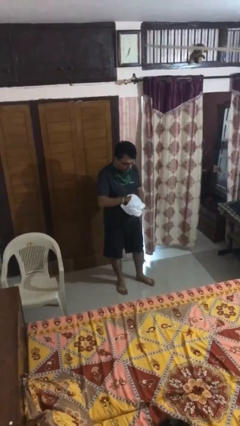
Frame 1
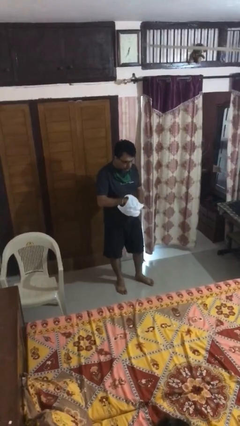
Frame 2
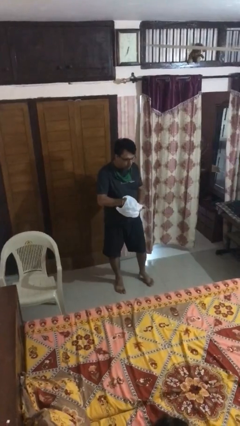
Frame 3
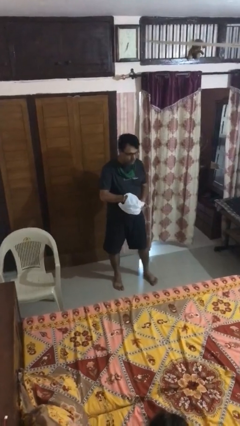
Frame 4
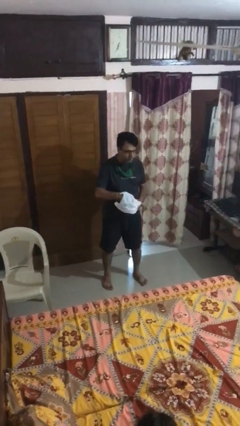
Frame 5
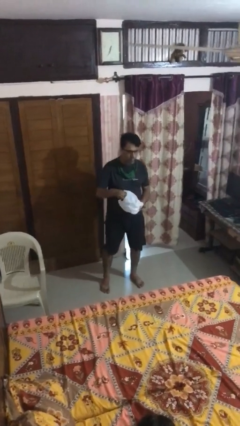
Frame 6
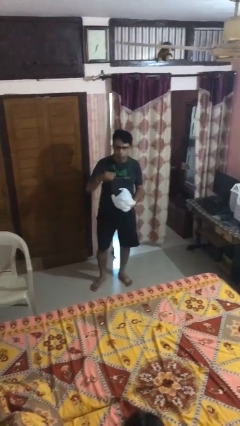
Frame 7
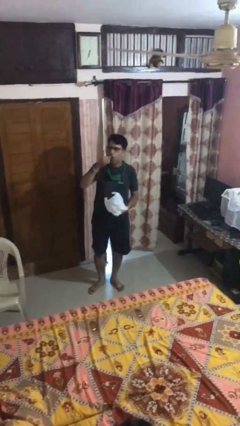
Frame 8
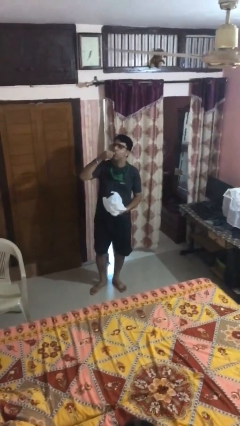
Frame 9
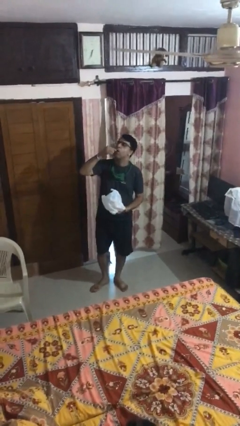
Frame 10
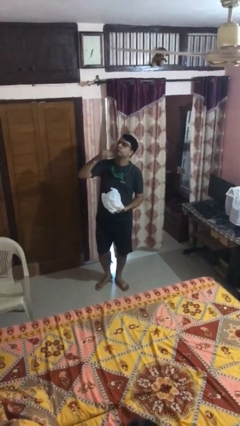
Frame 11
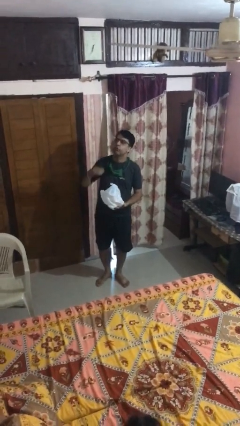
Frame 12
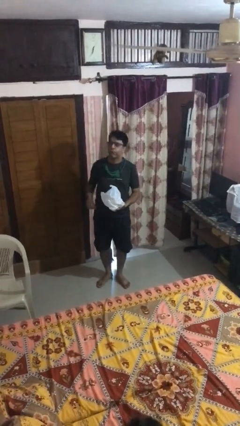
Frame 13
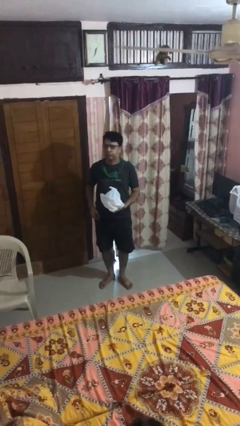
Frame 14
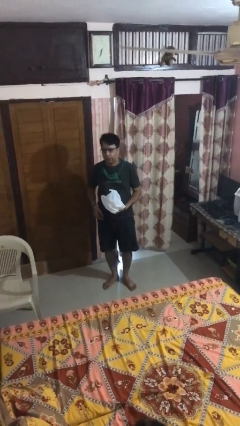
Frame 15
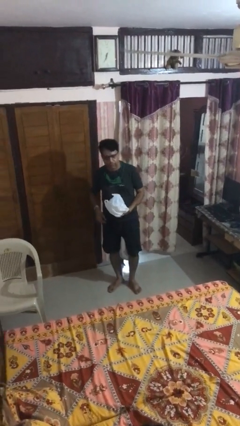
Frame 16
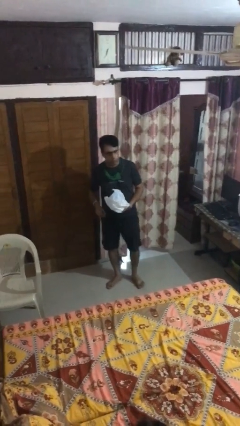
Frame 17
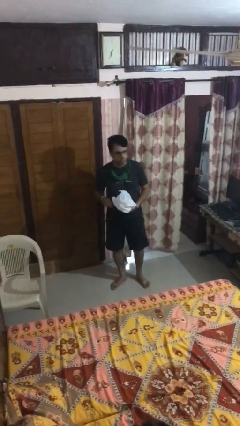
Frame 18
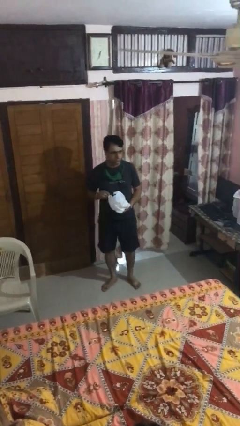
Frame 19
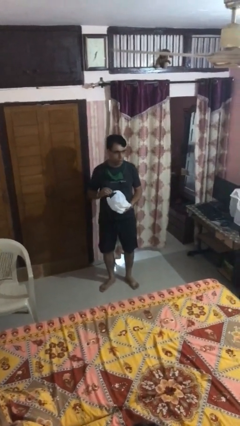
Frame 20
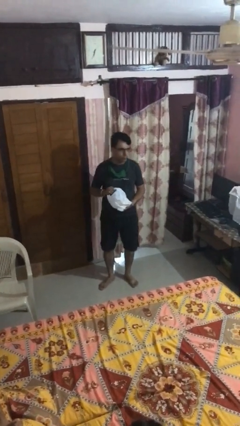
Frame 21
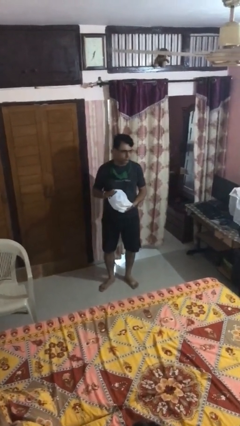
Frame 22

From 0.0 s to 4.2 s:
person eats snack from bag

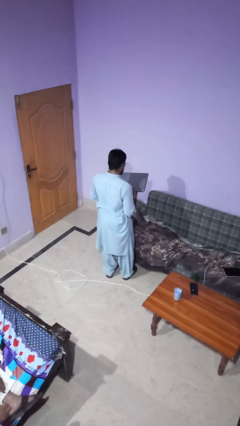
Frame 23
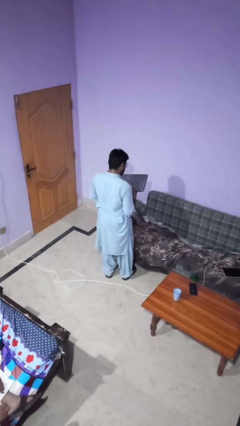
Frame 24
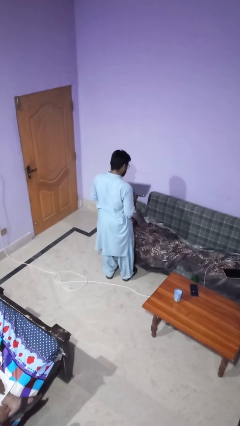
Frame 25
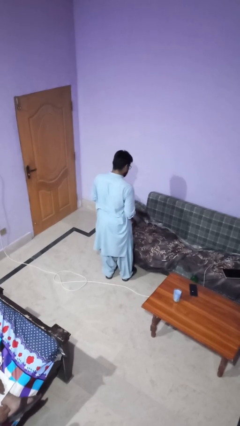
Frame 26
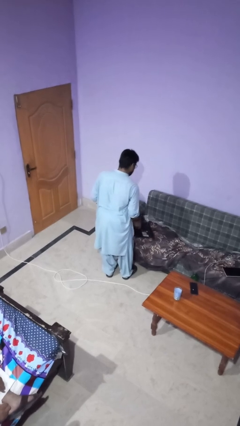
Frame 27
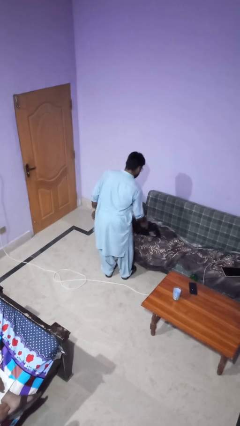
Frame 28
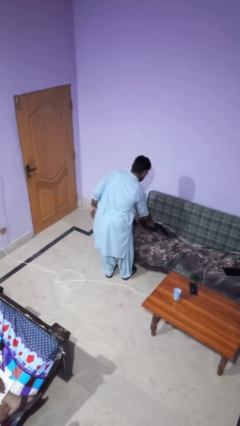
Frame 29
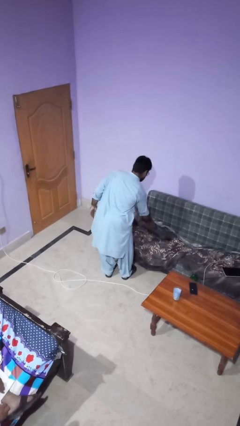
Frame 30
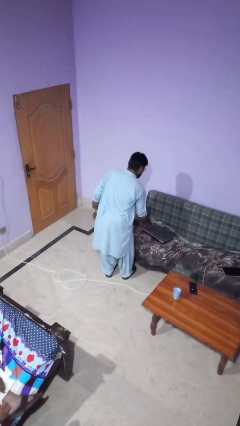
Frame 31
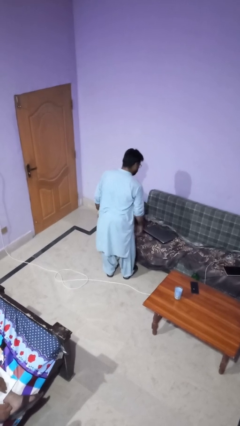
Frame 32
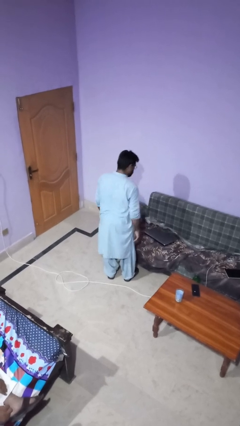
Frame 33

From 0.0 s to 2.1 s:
person puts down object on couch

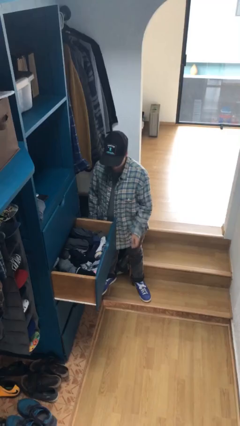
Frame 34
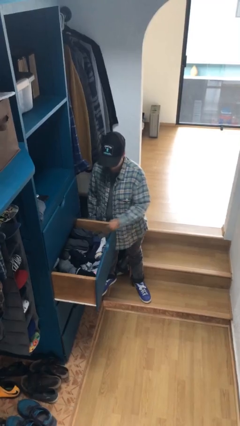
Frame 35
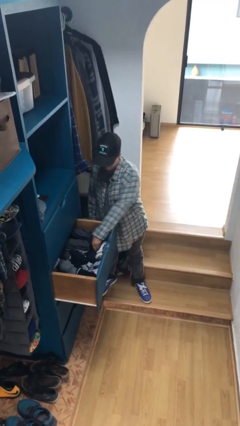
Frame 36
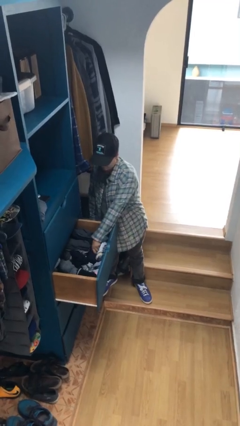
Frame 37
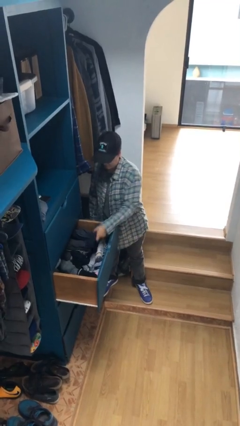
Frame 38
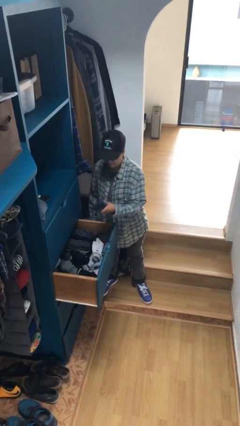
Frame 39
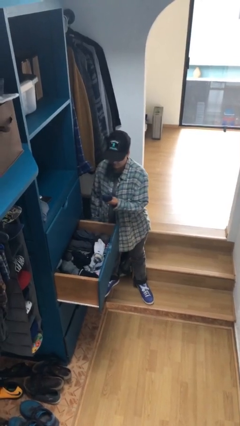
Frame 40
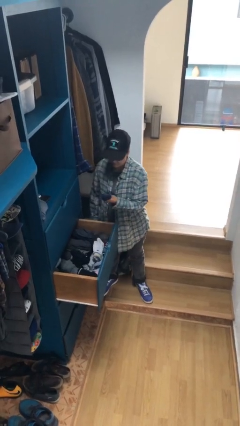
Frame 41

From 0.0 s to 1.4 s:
person takes clothes from dresser

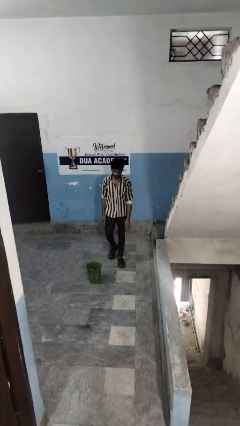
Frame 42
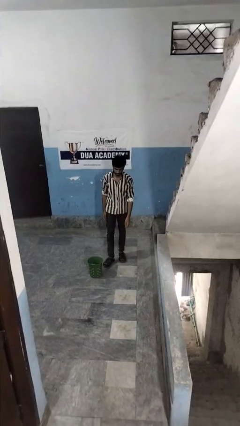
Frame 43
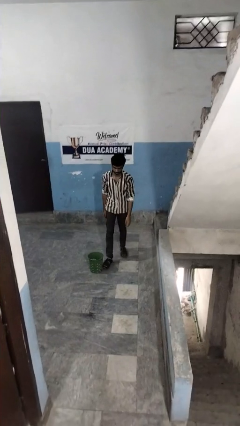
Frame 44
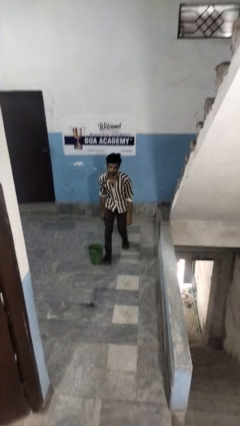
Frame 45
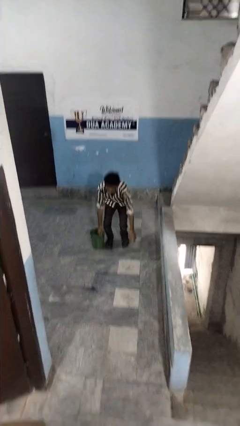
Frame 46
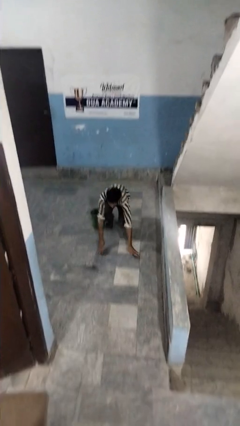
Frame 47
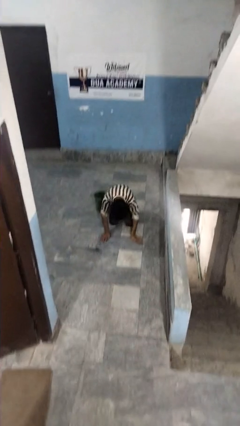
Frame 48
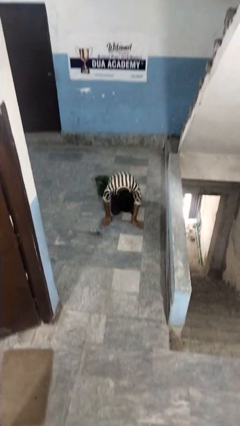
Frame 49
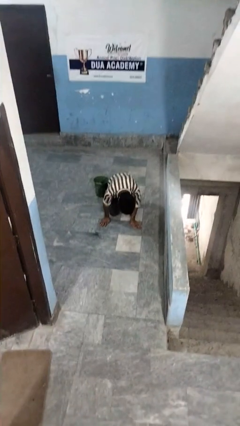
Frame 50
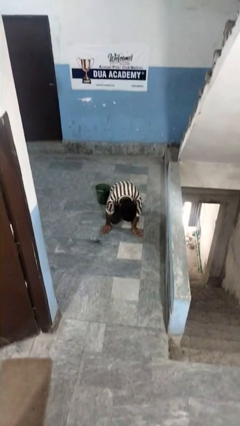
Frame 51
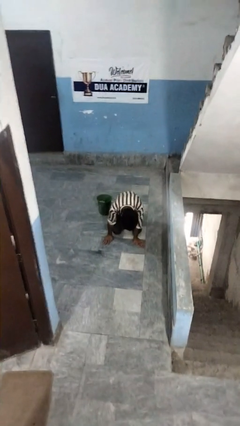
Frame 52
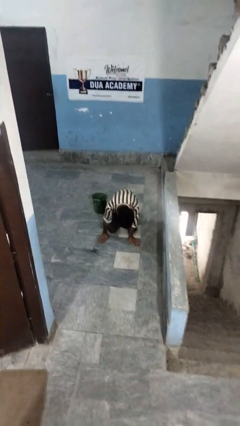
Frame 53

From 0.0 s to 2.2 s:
person trips on object on floor

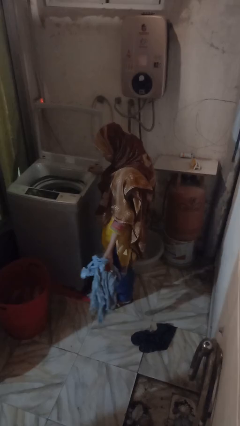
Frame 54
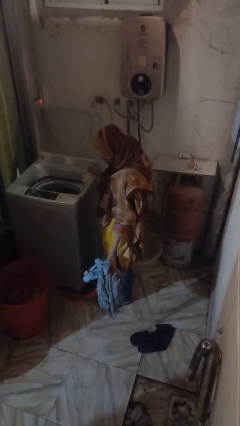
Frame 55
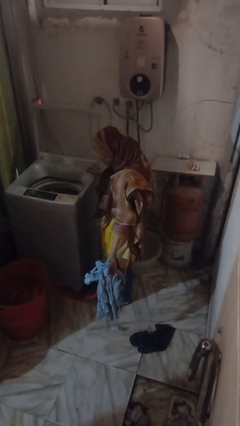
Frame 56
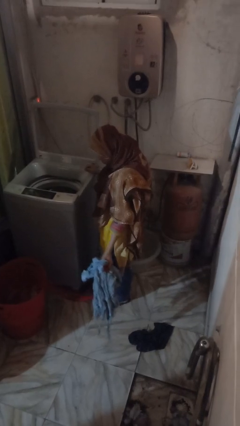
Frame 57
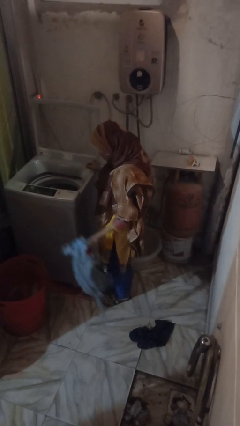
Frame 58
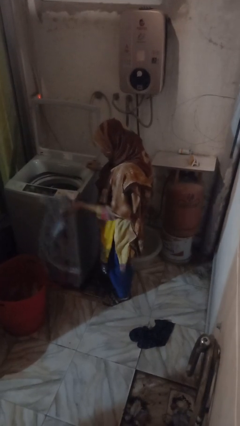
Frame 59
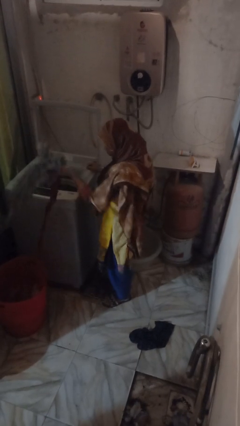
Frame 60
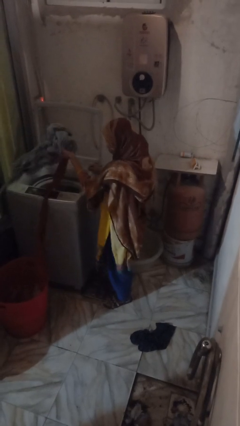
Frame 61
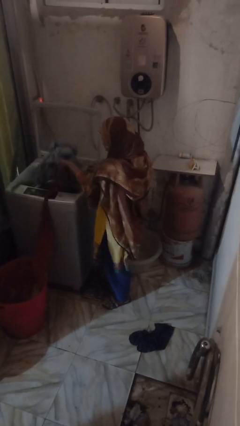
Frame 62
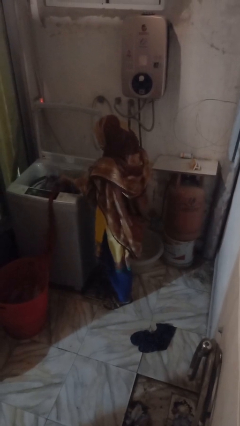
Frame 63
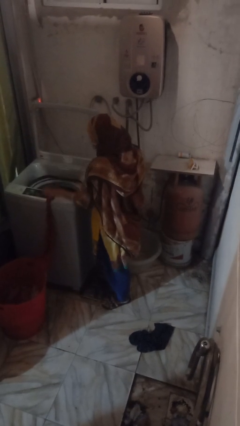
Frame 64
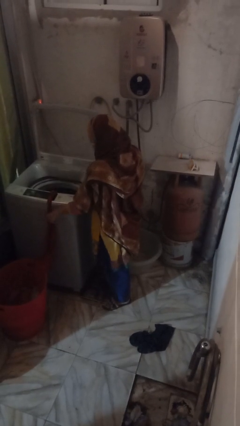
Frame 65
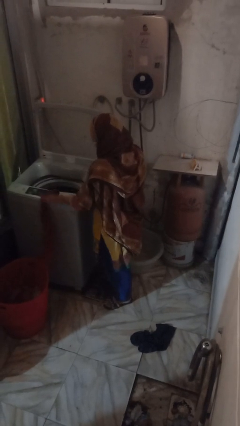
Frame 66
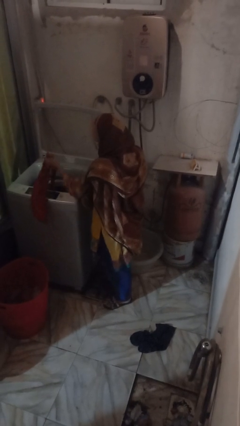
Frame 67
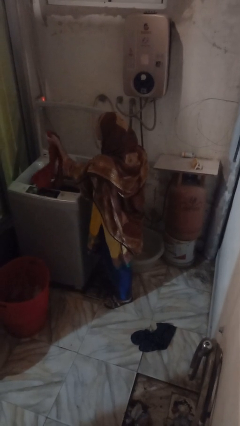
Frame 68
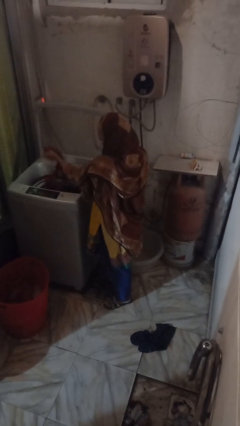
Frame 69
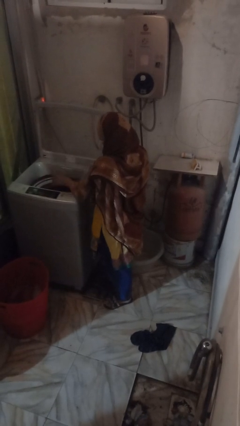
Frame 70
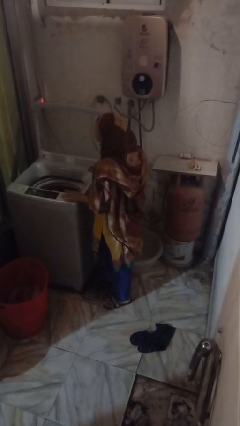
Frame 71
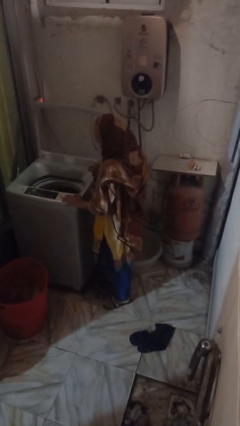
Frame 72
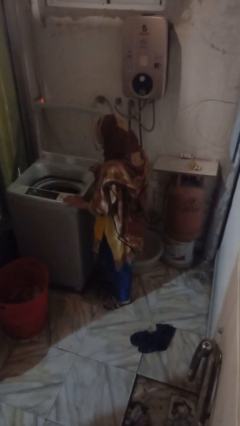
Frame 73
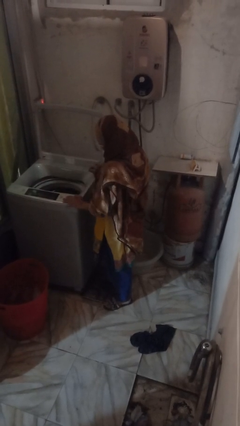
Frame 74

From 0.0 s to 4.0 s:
person loads clotheswasher

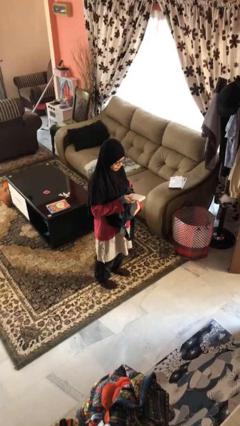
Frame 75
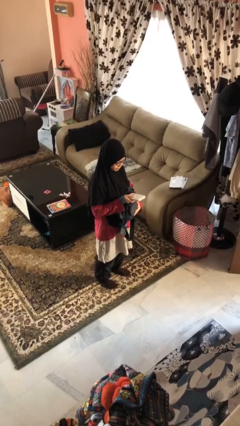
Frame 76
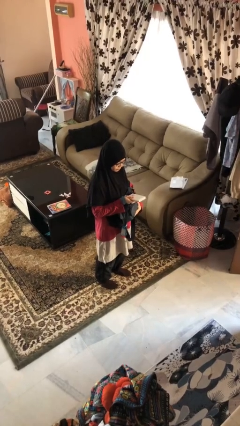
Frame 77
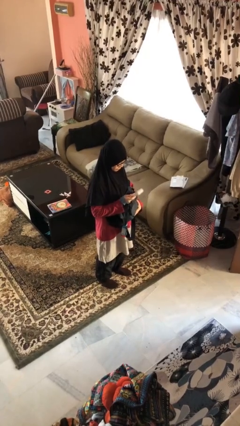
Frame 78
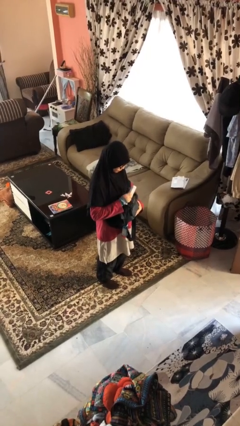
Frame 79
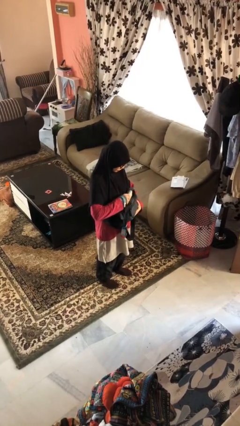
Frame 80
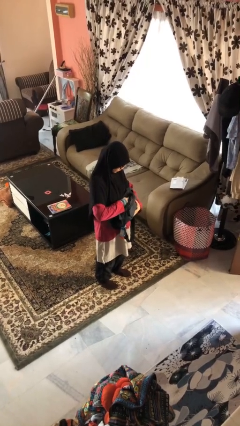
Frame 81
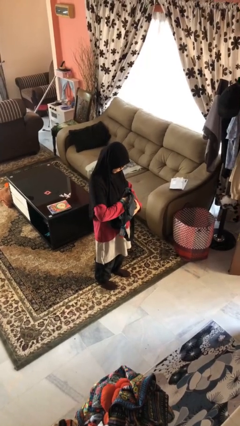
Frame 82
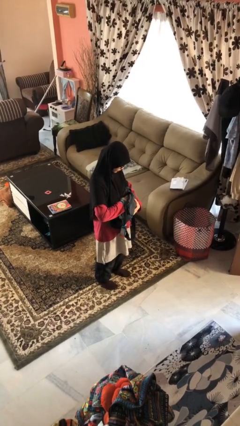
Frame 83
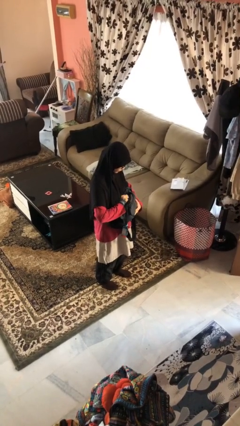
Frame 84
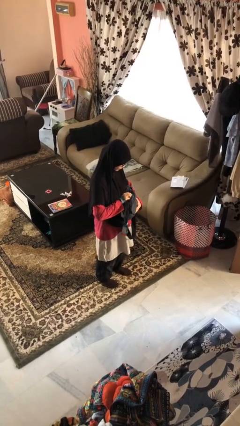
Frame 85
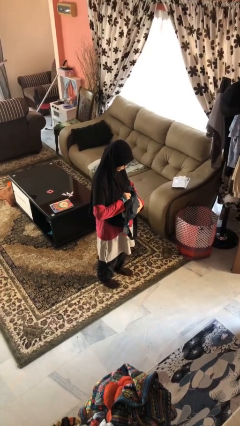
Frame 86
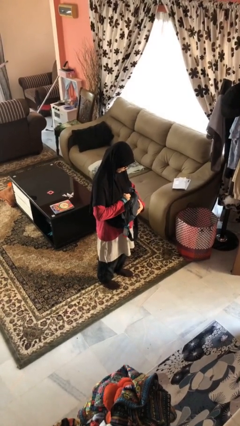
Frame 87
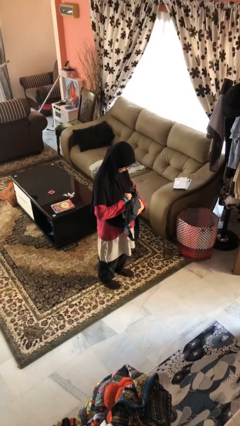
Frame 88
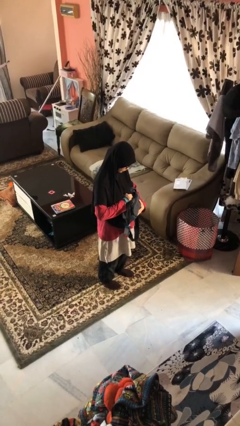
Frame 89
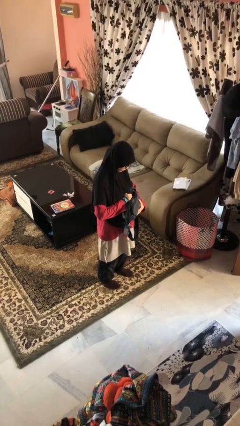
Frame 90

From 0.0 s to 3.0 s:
person puts object into purse

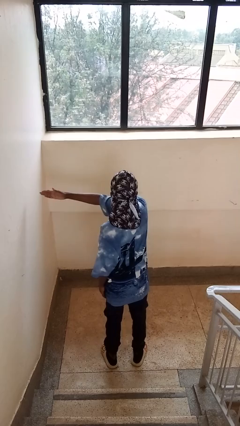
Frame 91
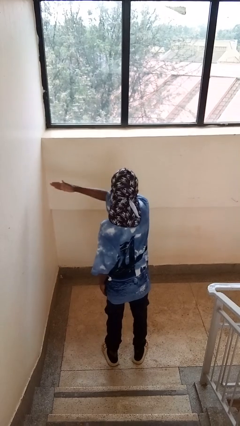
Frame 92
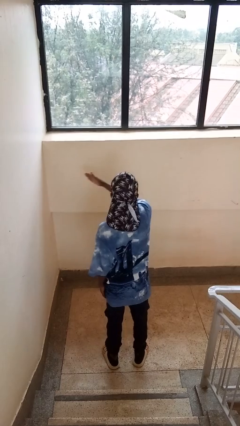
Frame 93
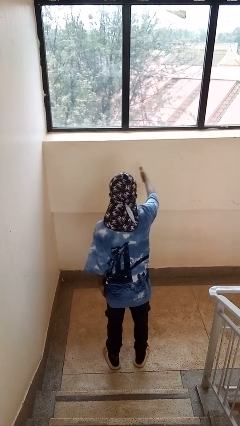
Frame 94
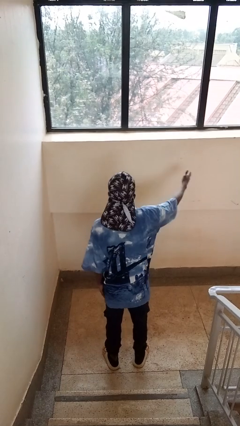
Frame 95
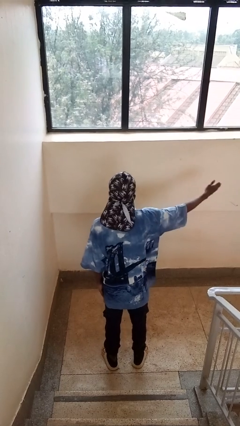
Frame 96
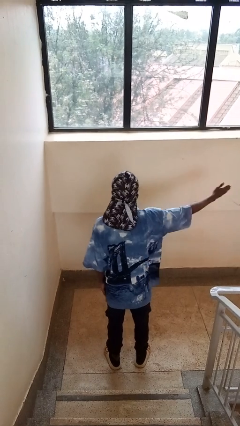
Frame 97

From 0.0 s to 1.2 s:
person gestures swipe right
